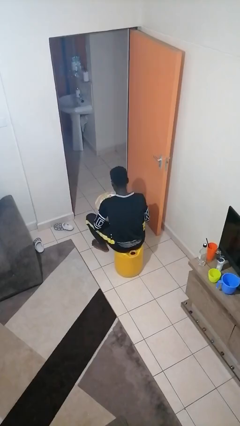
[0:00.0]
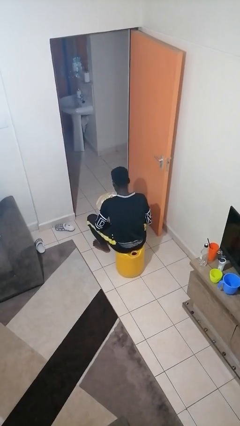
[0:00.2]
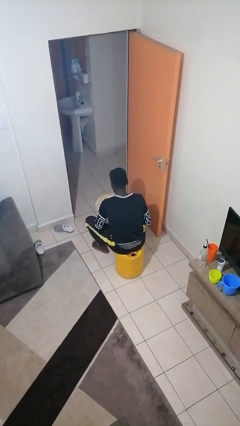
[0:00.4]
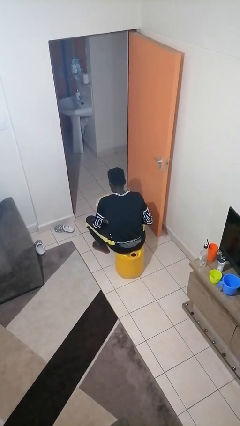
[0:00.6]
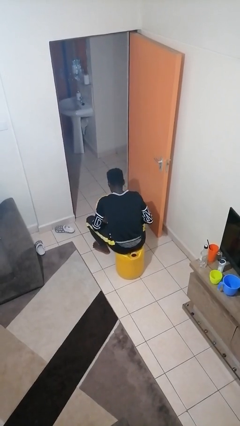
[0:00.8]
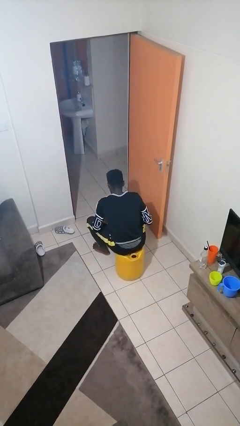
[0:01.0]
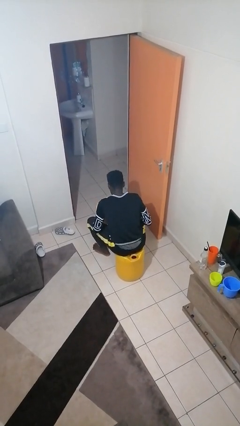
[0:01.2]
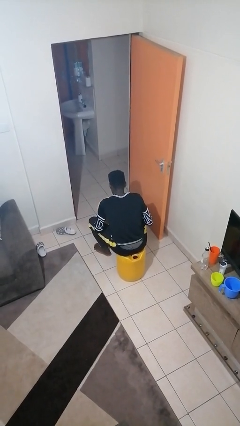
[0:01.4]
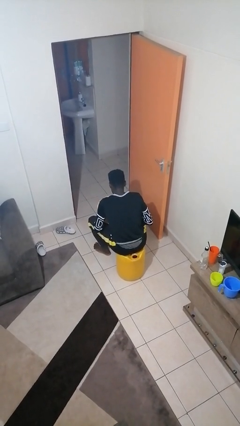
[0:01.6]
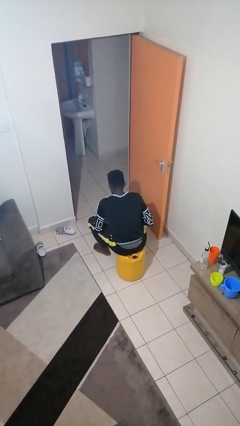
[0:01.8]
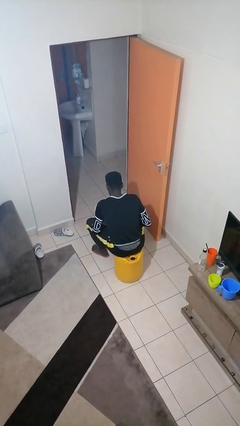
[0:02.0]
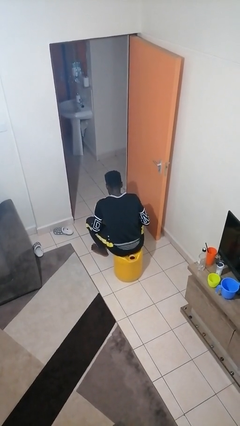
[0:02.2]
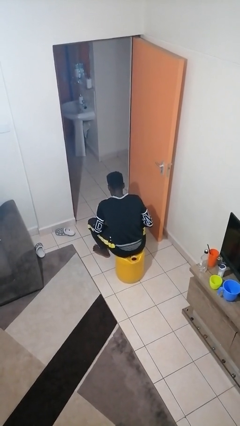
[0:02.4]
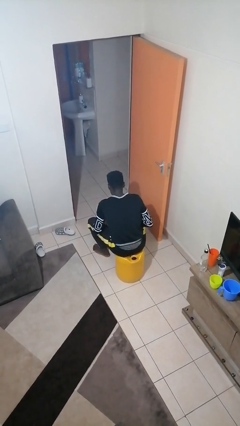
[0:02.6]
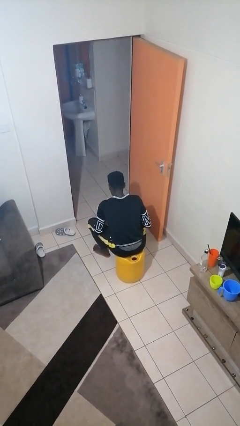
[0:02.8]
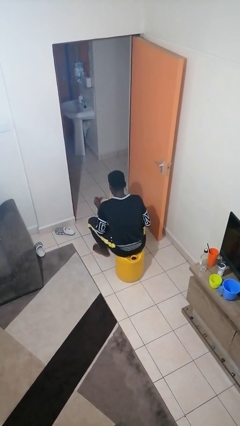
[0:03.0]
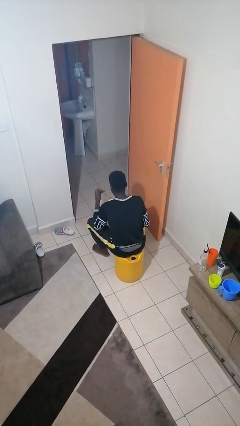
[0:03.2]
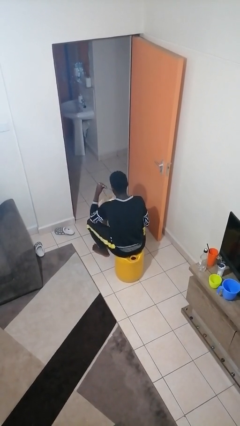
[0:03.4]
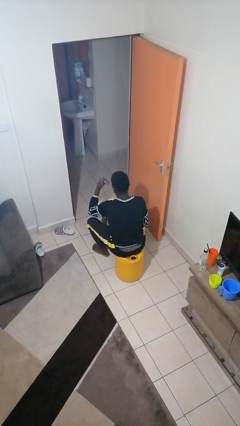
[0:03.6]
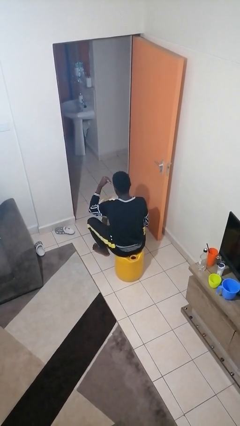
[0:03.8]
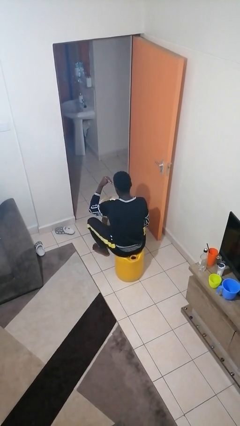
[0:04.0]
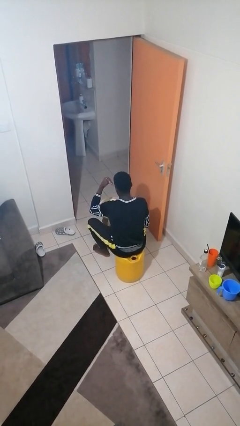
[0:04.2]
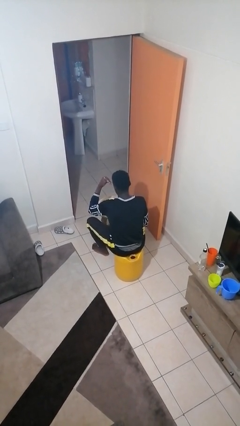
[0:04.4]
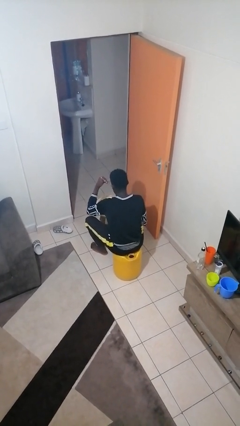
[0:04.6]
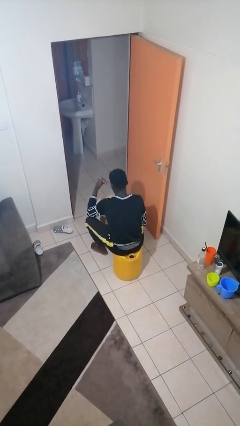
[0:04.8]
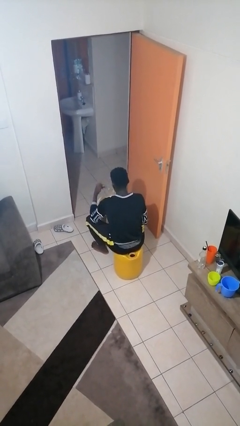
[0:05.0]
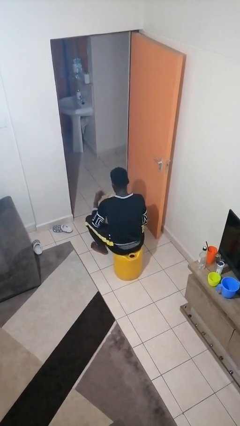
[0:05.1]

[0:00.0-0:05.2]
person eats with utensil

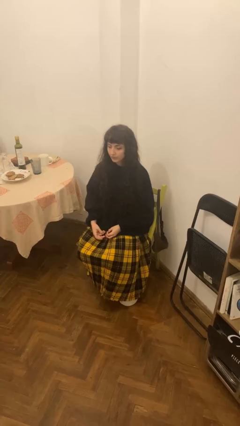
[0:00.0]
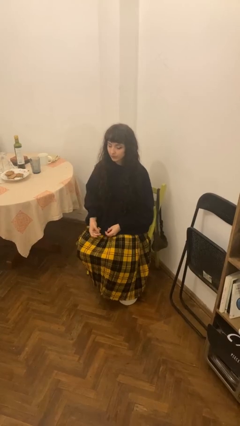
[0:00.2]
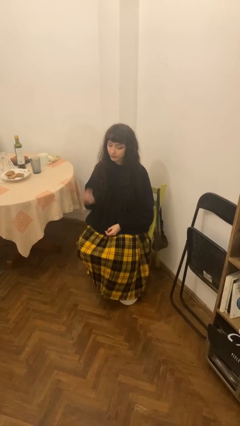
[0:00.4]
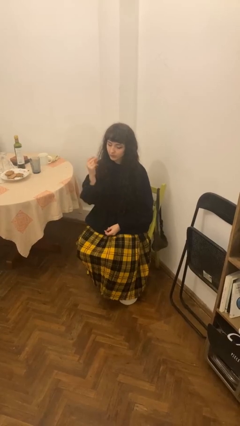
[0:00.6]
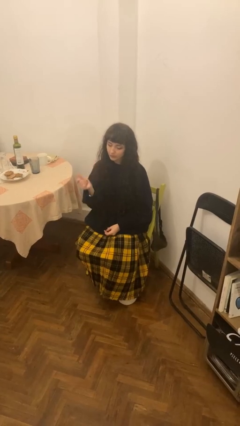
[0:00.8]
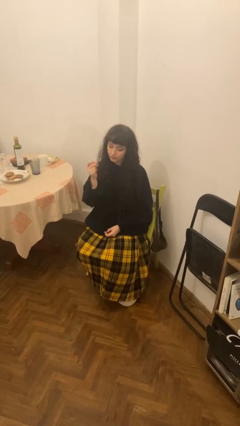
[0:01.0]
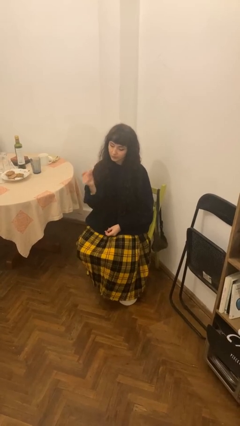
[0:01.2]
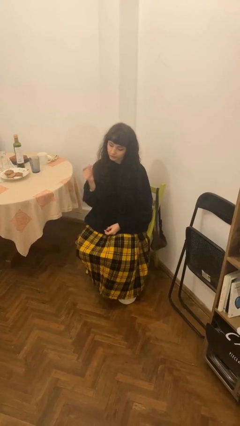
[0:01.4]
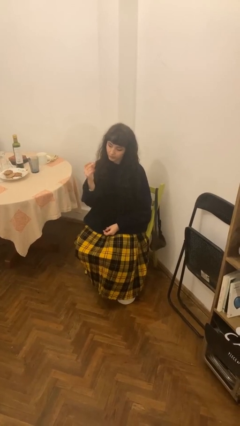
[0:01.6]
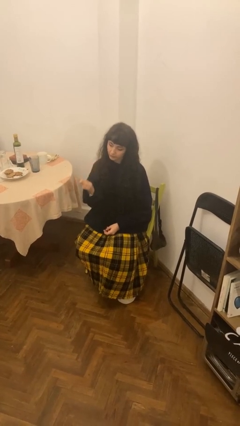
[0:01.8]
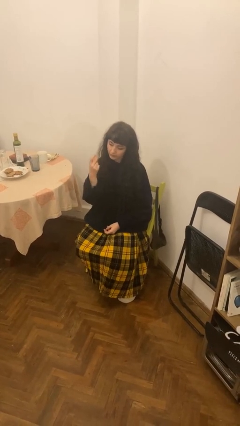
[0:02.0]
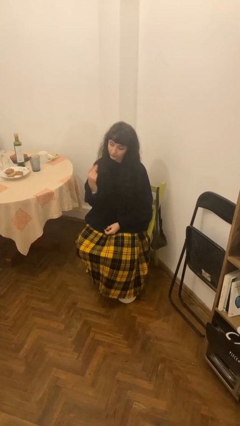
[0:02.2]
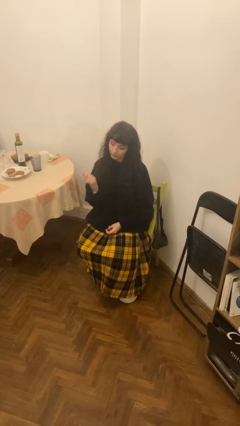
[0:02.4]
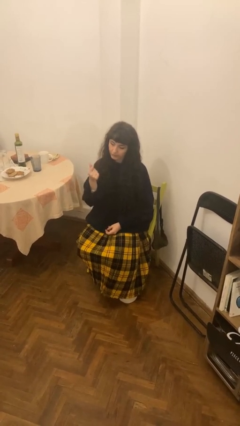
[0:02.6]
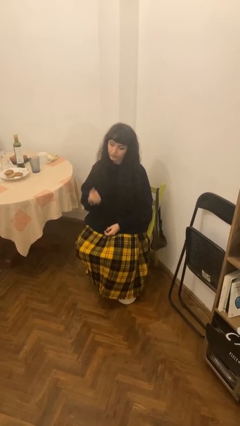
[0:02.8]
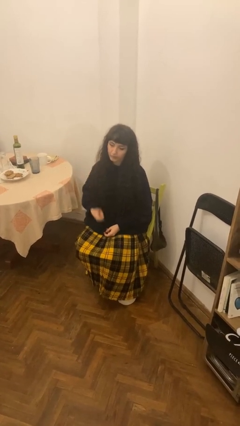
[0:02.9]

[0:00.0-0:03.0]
person snaps fingers

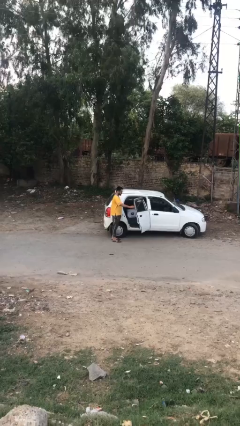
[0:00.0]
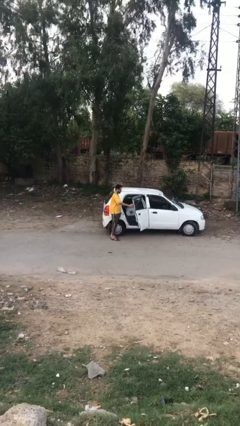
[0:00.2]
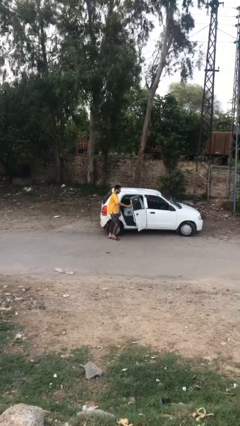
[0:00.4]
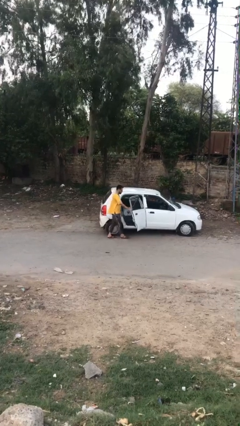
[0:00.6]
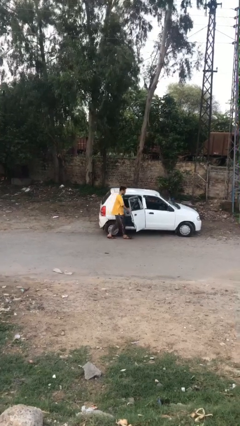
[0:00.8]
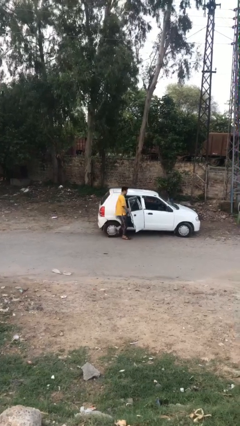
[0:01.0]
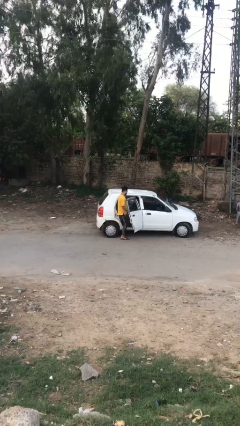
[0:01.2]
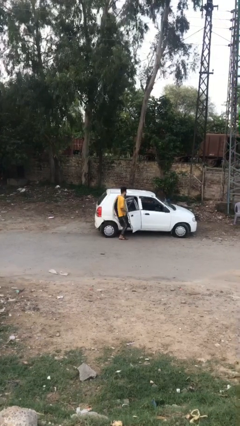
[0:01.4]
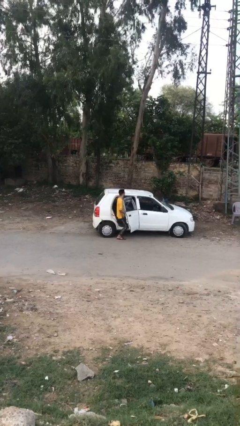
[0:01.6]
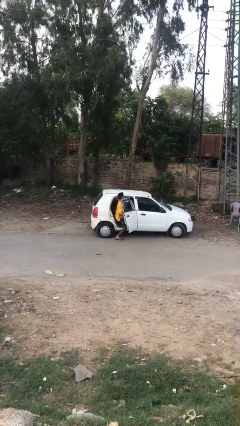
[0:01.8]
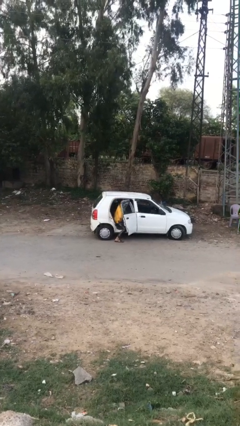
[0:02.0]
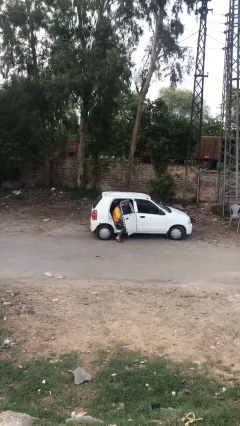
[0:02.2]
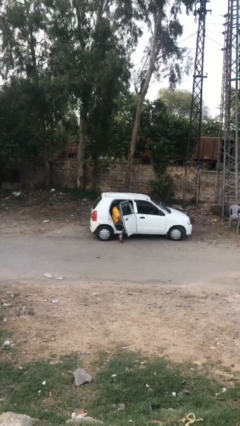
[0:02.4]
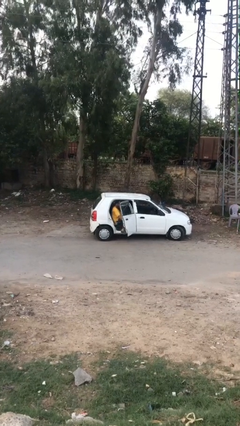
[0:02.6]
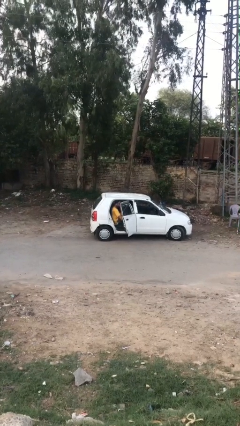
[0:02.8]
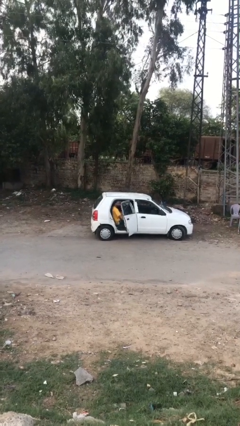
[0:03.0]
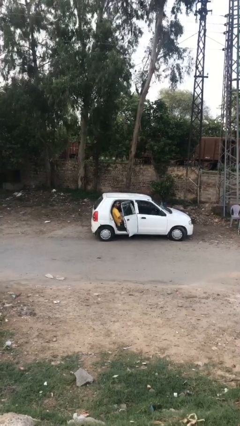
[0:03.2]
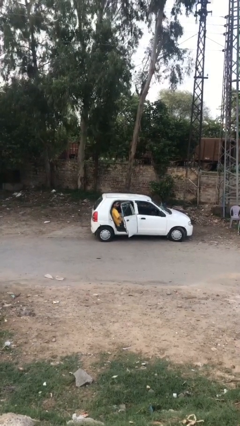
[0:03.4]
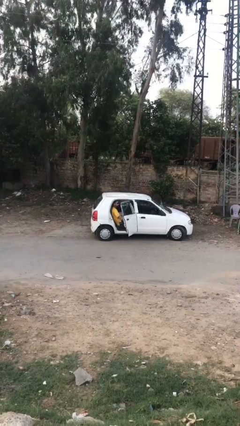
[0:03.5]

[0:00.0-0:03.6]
person enters car

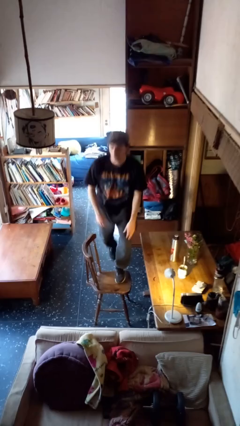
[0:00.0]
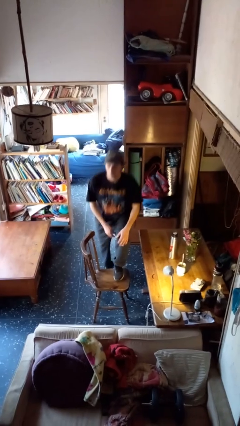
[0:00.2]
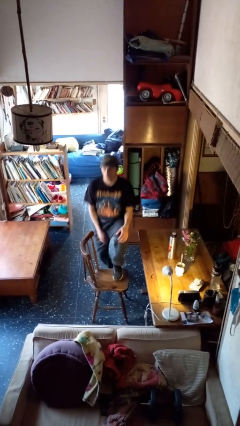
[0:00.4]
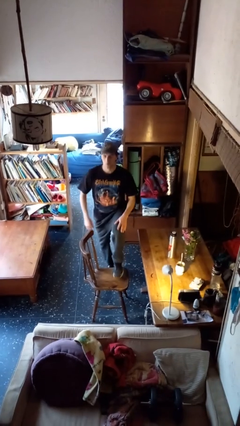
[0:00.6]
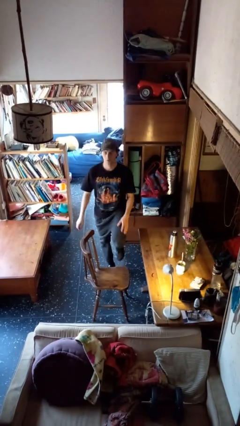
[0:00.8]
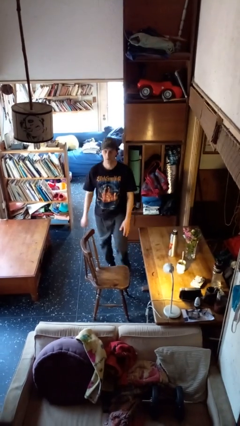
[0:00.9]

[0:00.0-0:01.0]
person climbs off chair

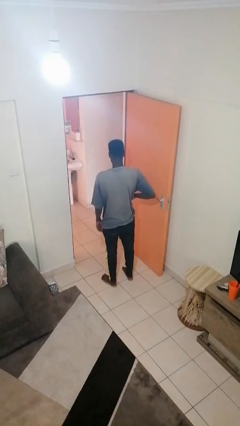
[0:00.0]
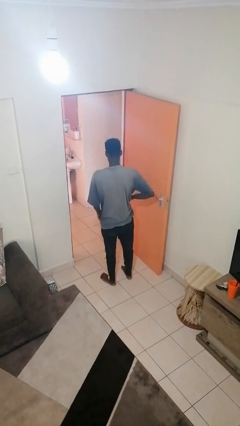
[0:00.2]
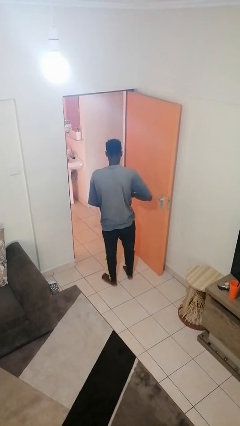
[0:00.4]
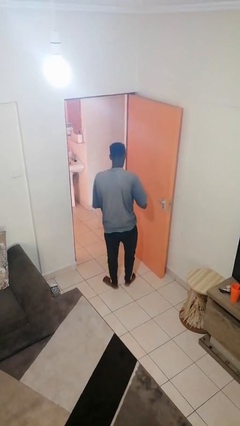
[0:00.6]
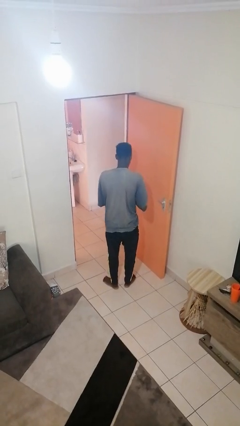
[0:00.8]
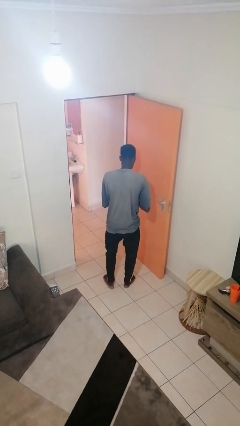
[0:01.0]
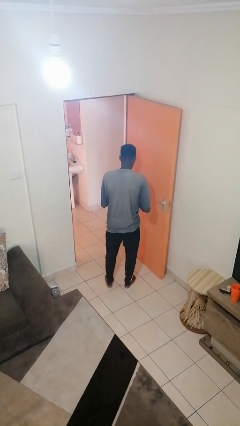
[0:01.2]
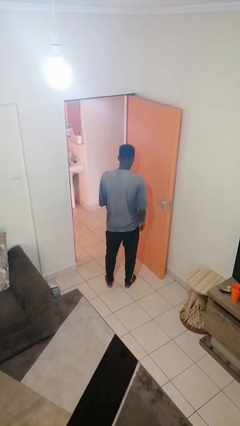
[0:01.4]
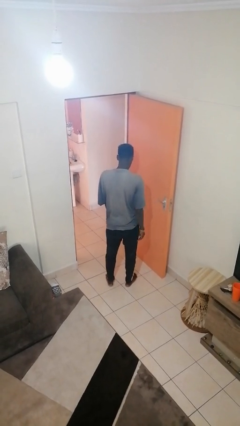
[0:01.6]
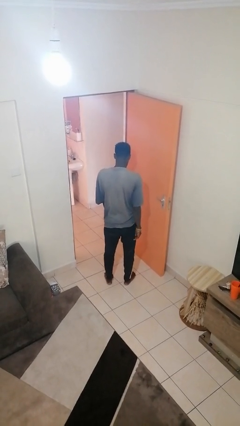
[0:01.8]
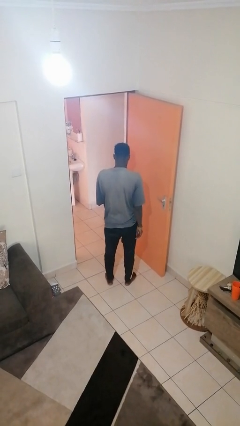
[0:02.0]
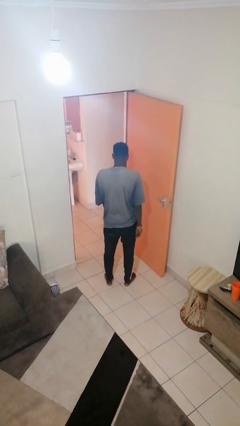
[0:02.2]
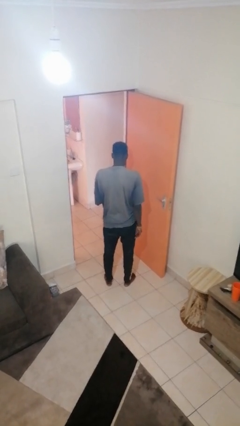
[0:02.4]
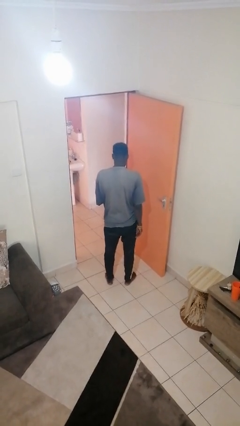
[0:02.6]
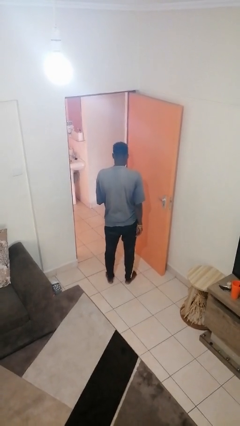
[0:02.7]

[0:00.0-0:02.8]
person takes phone from pocket

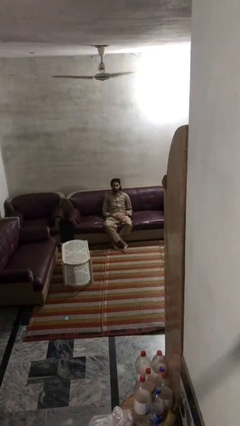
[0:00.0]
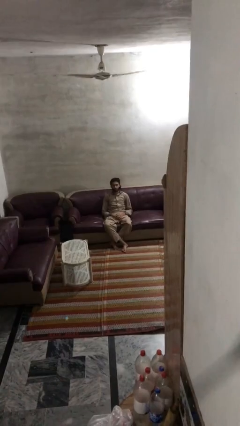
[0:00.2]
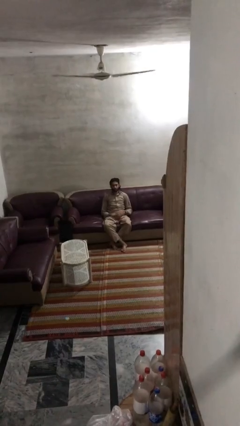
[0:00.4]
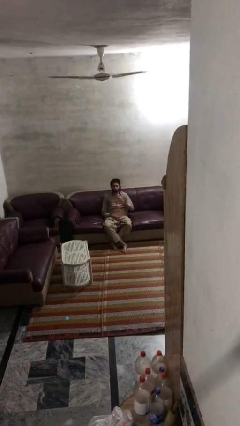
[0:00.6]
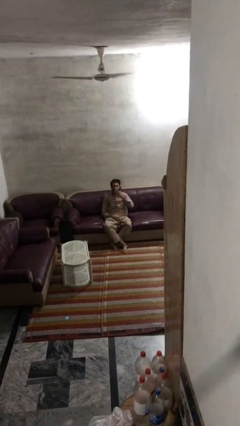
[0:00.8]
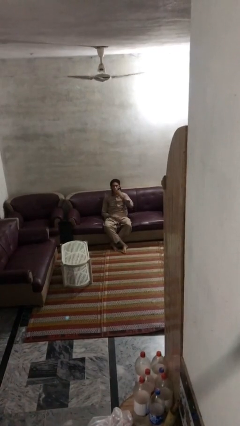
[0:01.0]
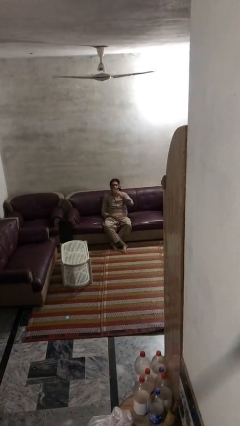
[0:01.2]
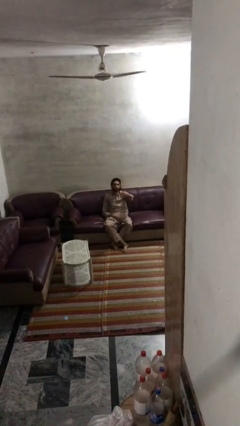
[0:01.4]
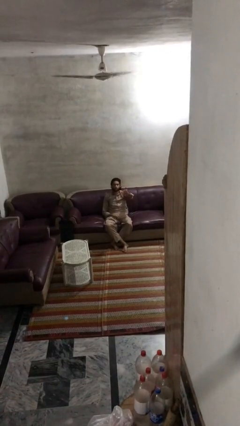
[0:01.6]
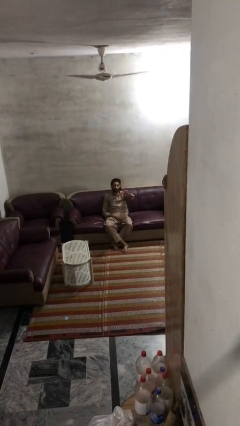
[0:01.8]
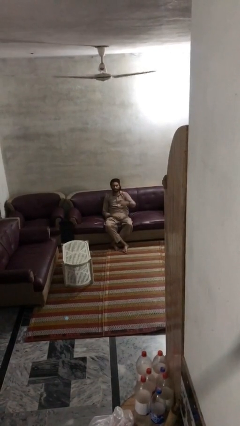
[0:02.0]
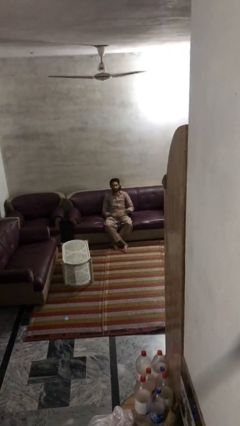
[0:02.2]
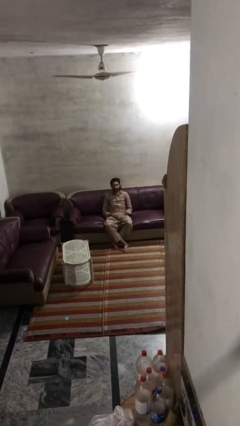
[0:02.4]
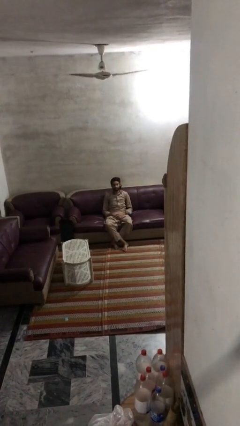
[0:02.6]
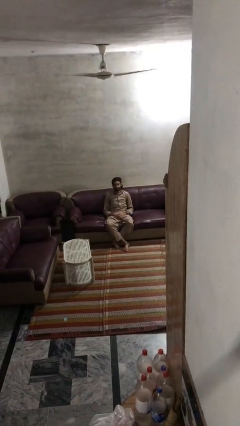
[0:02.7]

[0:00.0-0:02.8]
person gestures blow kiss
